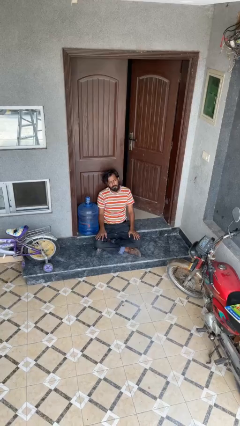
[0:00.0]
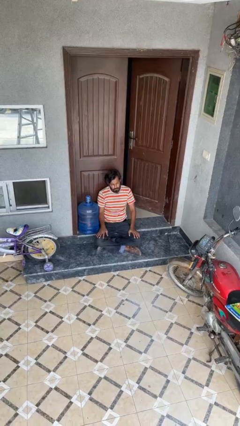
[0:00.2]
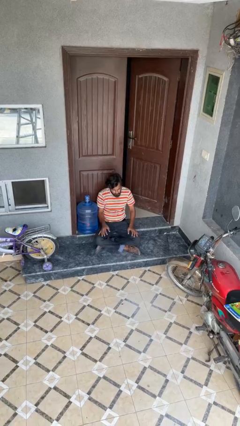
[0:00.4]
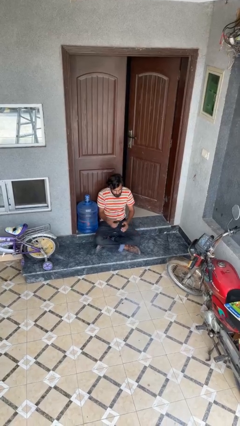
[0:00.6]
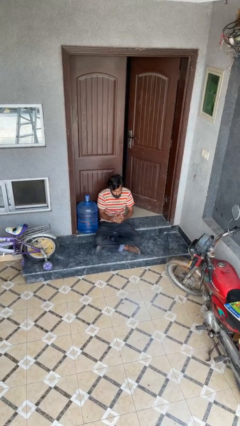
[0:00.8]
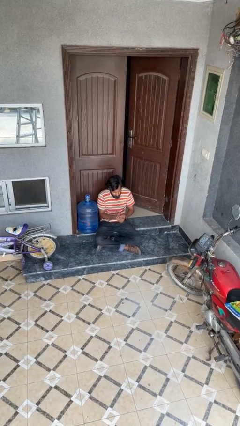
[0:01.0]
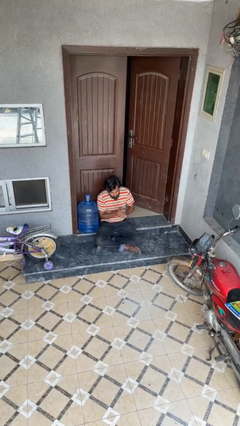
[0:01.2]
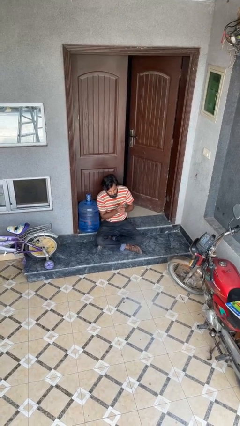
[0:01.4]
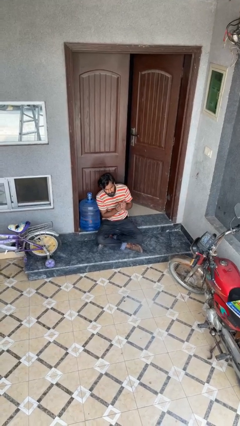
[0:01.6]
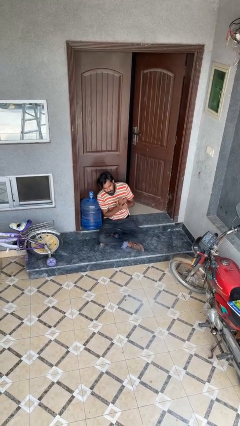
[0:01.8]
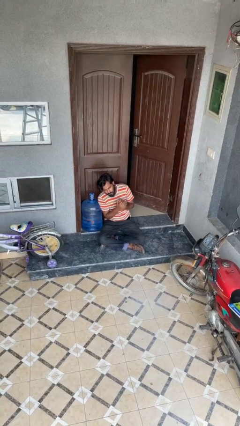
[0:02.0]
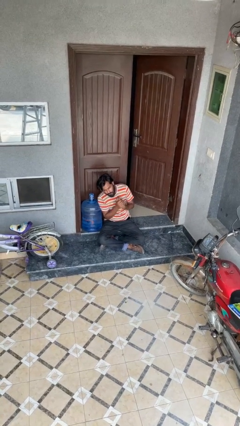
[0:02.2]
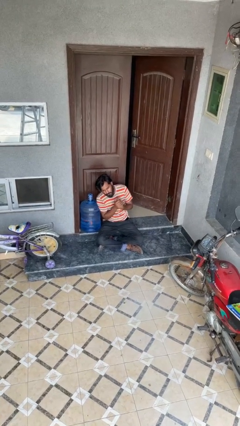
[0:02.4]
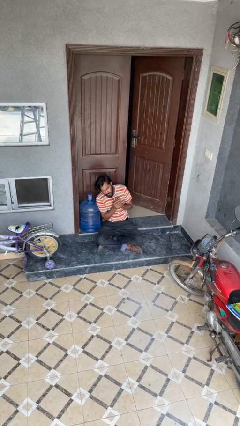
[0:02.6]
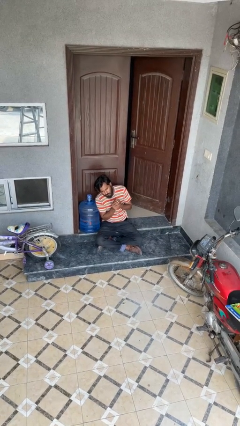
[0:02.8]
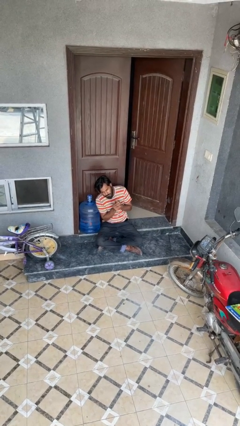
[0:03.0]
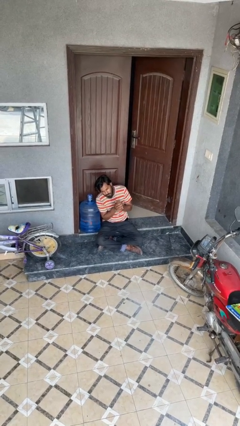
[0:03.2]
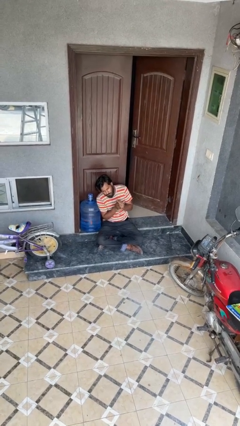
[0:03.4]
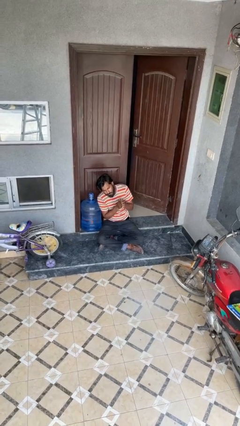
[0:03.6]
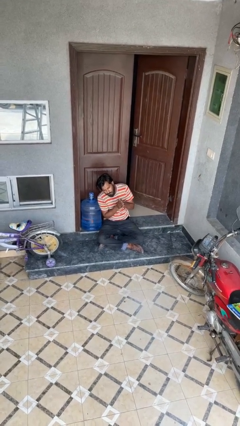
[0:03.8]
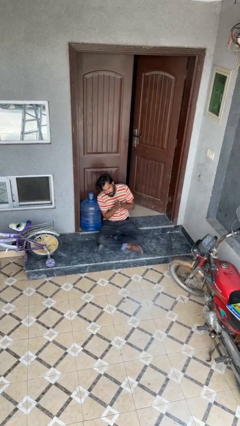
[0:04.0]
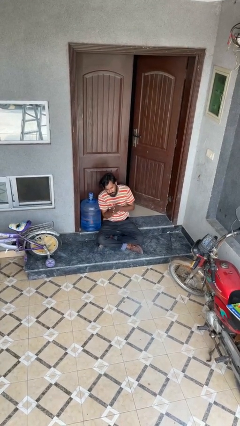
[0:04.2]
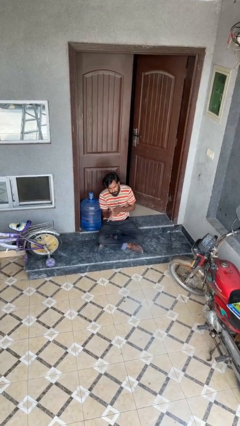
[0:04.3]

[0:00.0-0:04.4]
person looks at hands in lap

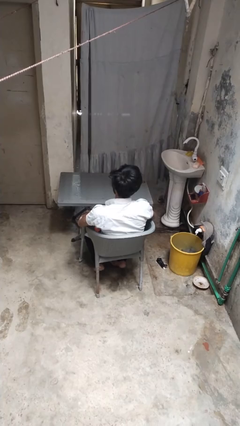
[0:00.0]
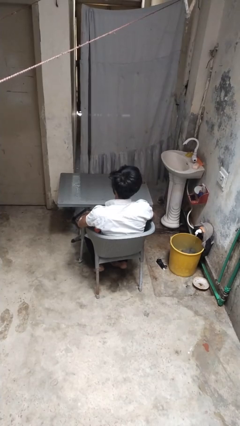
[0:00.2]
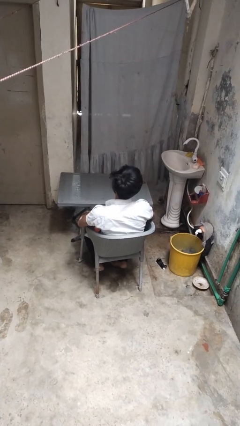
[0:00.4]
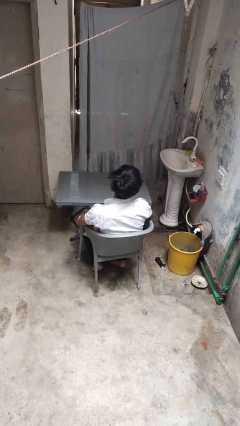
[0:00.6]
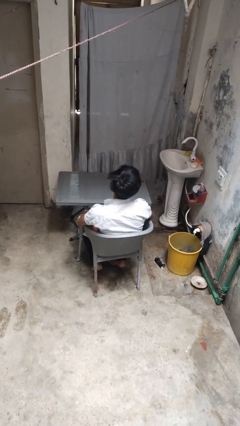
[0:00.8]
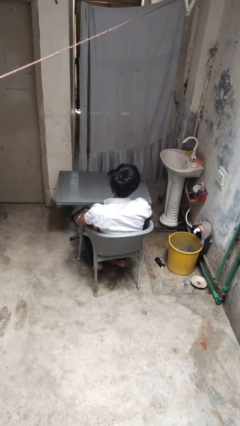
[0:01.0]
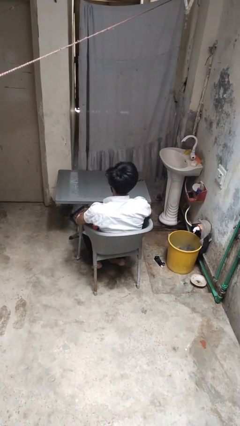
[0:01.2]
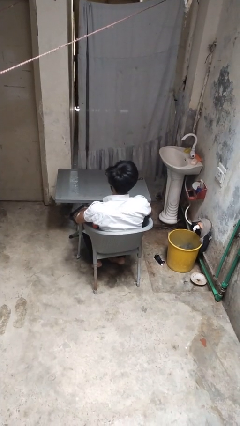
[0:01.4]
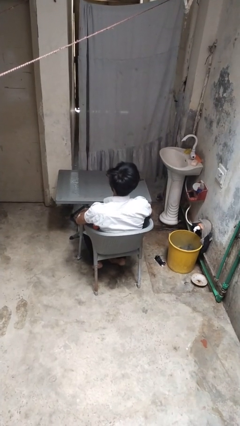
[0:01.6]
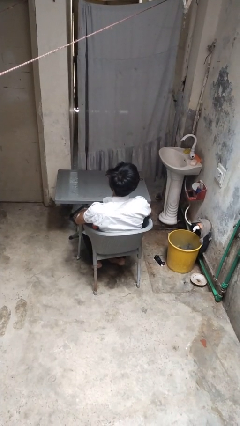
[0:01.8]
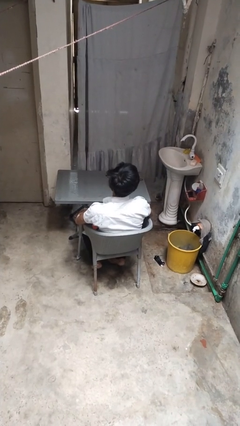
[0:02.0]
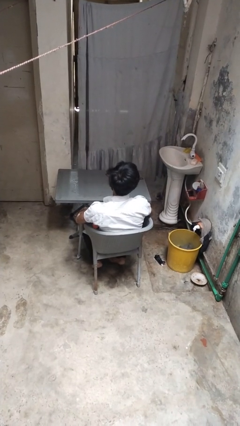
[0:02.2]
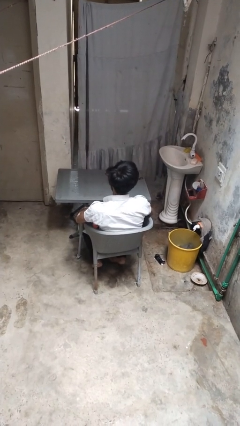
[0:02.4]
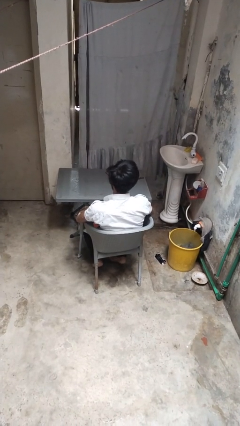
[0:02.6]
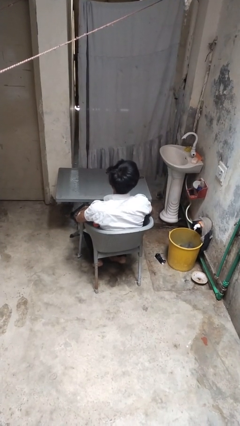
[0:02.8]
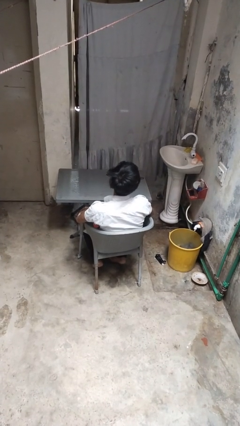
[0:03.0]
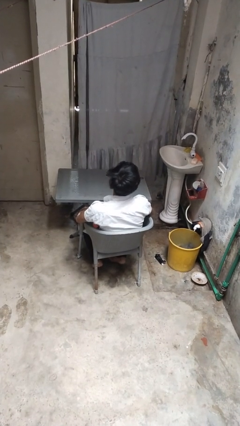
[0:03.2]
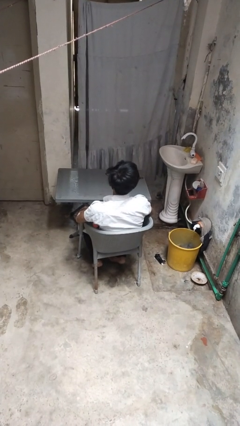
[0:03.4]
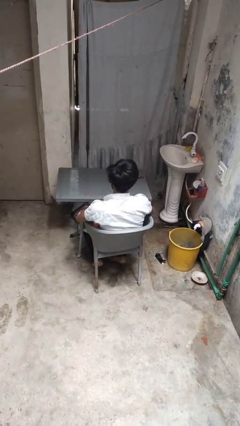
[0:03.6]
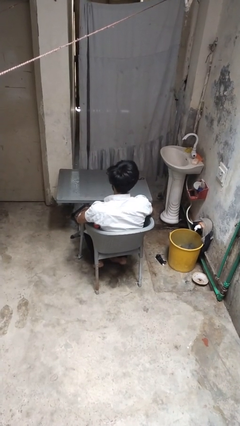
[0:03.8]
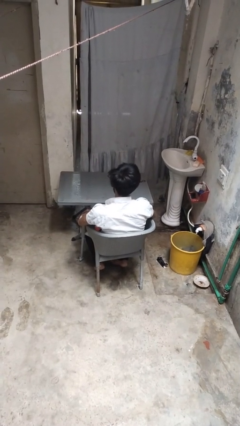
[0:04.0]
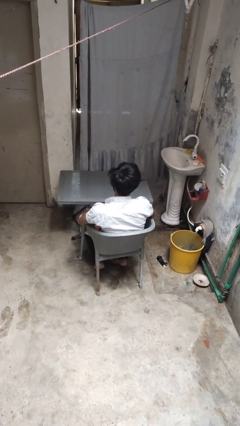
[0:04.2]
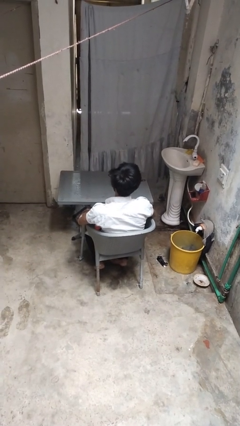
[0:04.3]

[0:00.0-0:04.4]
person nods head

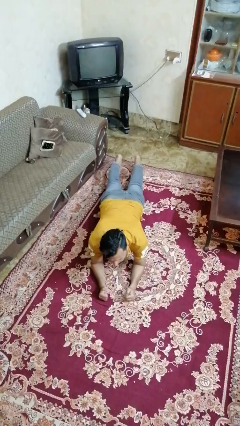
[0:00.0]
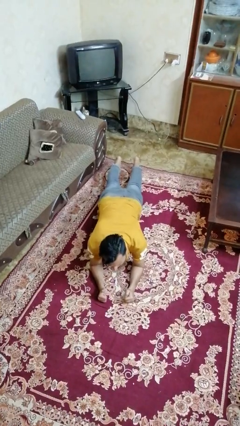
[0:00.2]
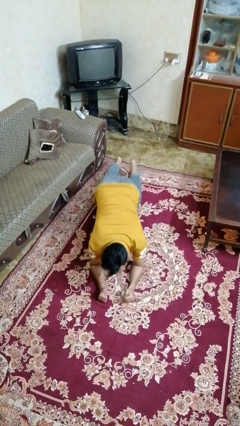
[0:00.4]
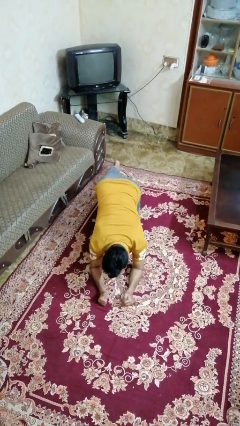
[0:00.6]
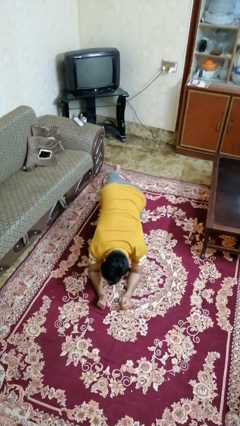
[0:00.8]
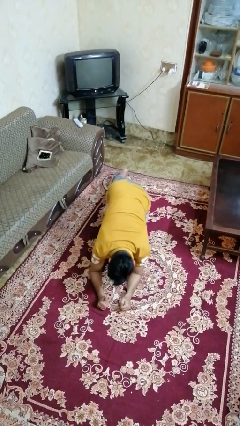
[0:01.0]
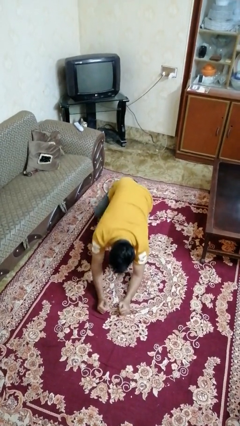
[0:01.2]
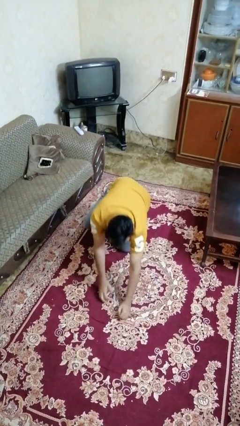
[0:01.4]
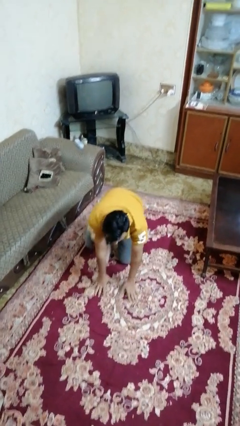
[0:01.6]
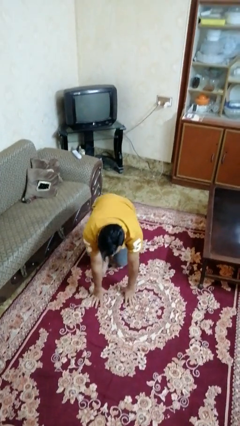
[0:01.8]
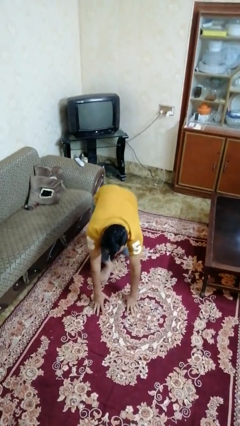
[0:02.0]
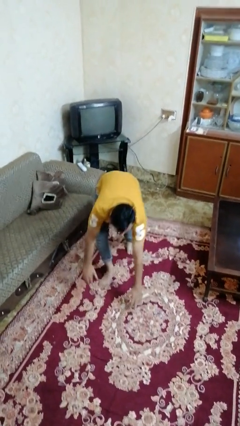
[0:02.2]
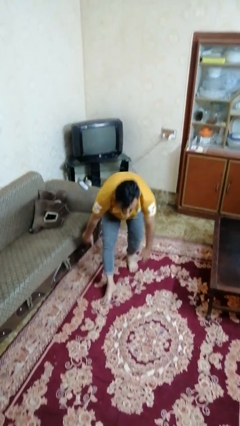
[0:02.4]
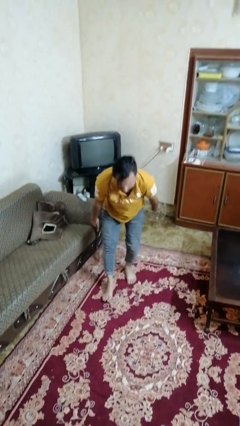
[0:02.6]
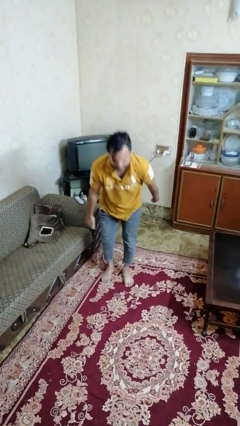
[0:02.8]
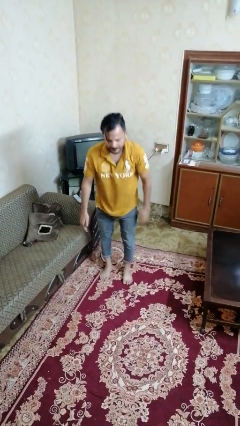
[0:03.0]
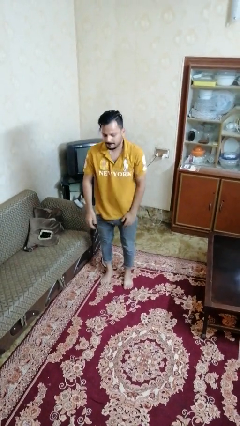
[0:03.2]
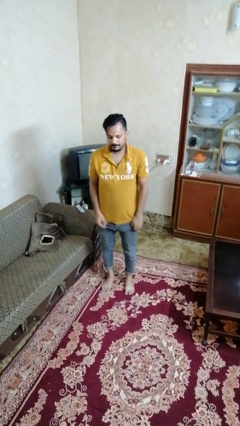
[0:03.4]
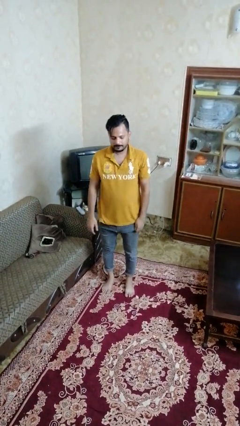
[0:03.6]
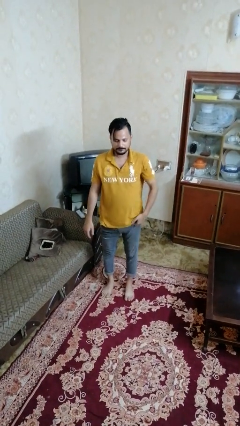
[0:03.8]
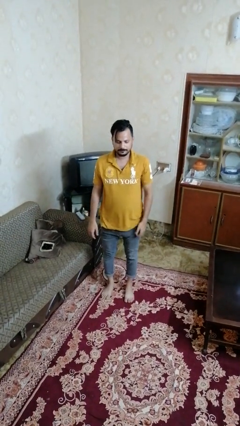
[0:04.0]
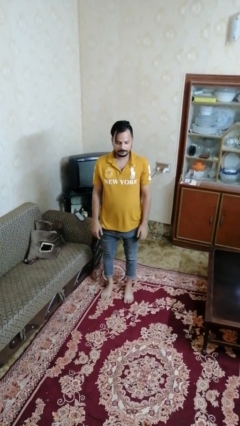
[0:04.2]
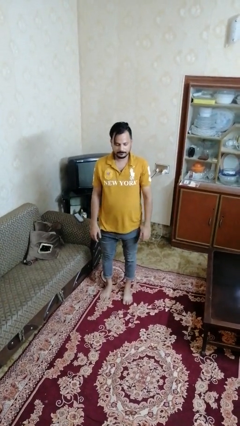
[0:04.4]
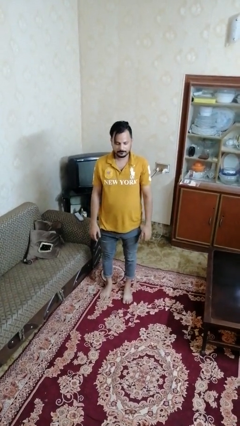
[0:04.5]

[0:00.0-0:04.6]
person stands up from floor

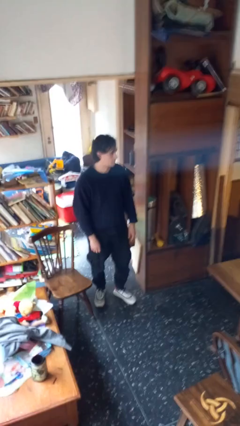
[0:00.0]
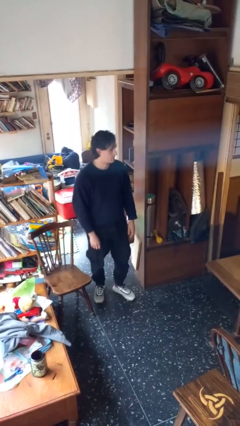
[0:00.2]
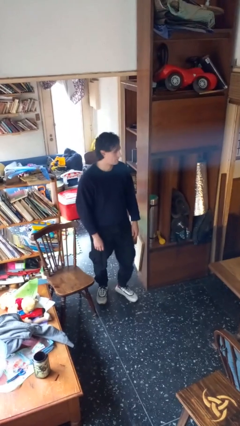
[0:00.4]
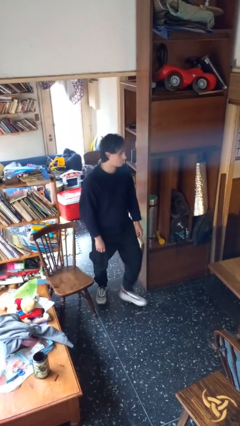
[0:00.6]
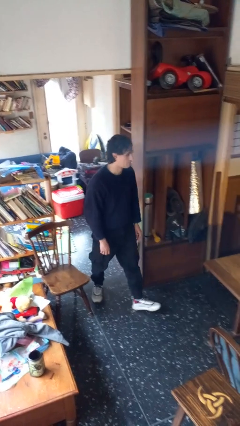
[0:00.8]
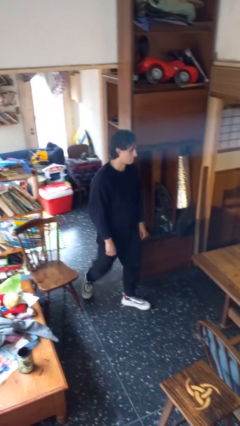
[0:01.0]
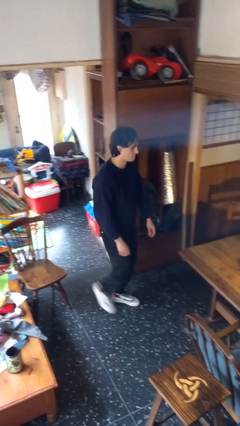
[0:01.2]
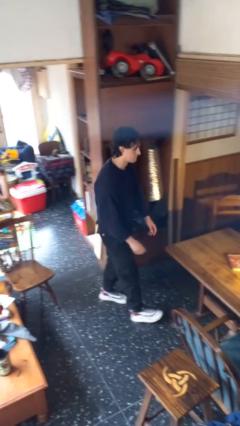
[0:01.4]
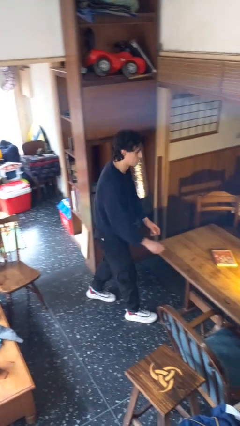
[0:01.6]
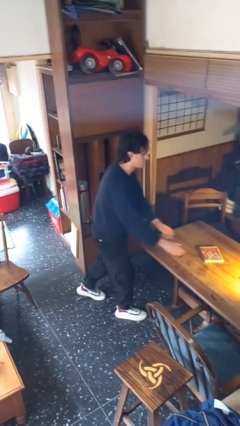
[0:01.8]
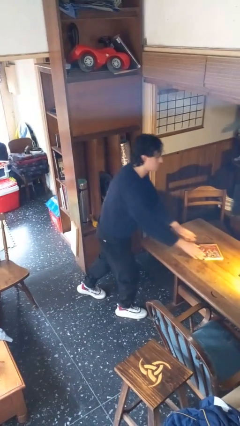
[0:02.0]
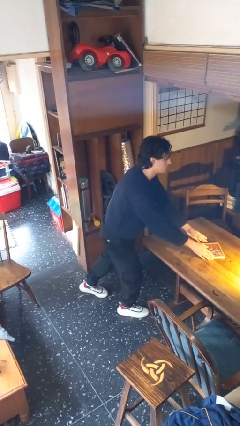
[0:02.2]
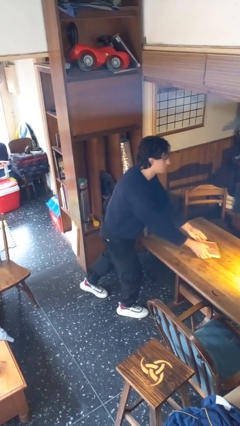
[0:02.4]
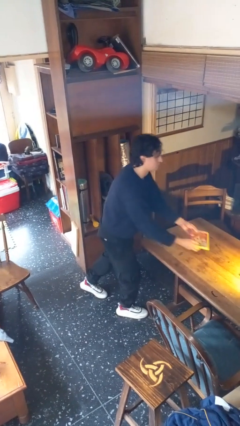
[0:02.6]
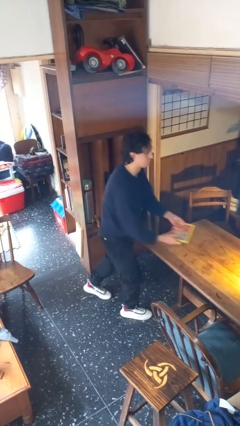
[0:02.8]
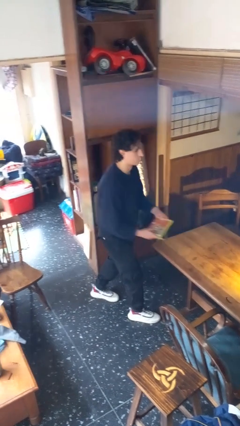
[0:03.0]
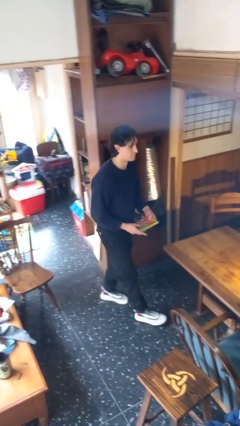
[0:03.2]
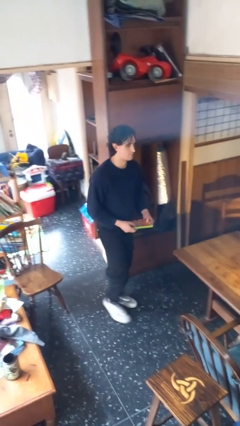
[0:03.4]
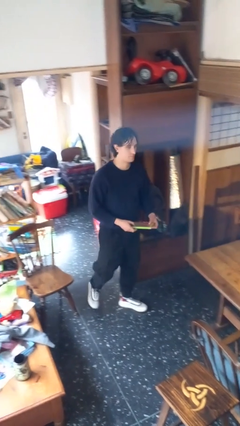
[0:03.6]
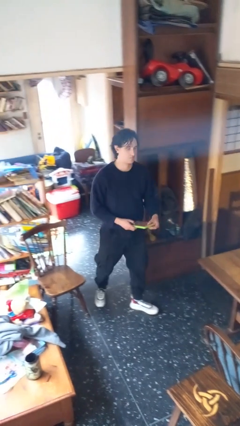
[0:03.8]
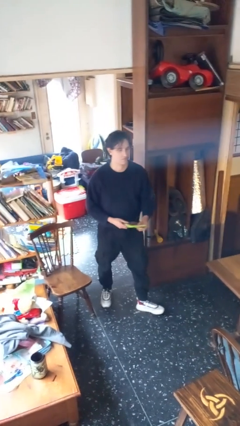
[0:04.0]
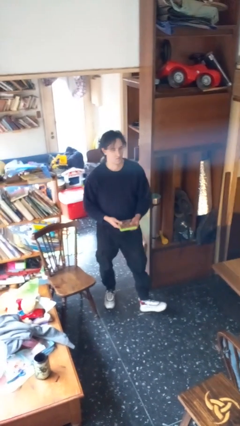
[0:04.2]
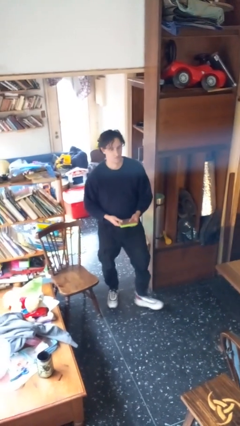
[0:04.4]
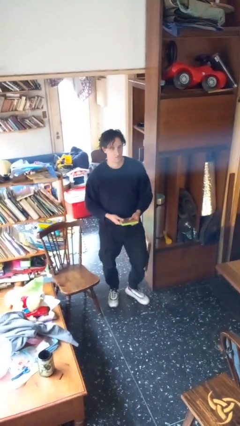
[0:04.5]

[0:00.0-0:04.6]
person picks up object from table
